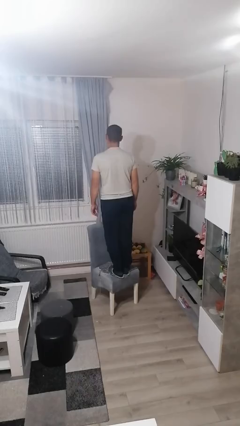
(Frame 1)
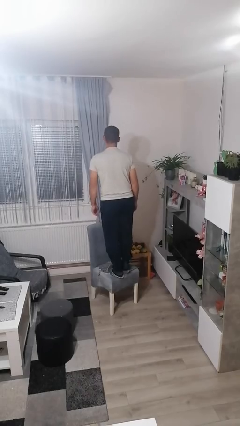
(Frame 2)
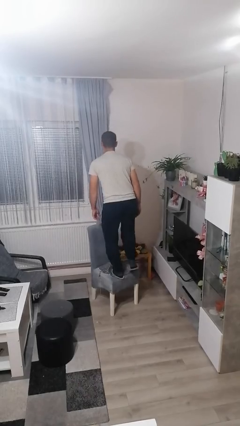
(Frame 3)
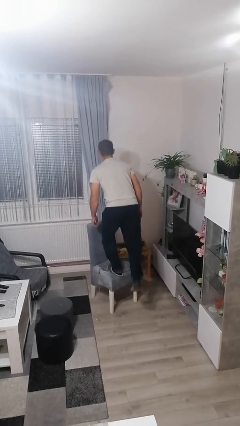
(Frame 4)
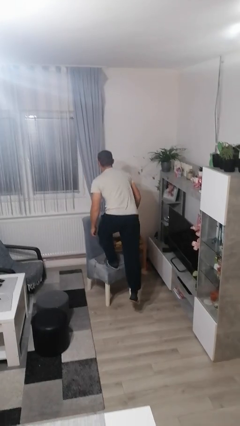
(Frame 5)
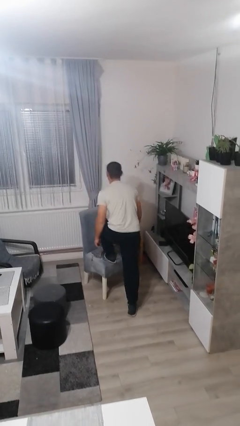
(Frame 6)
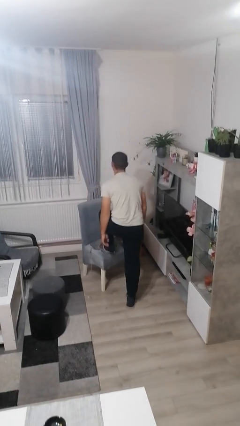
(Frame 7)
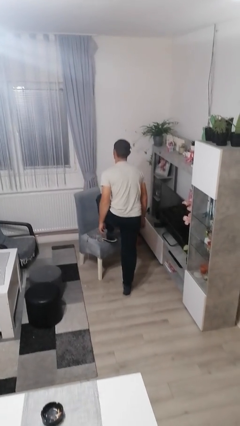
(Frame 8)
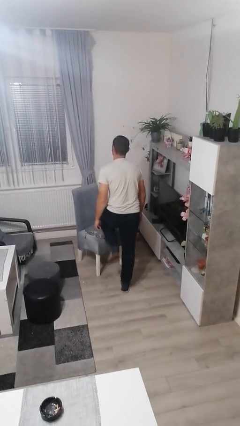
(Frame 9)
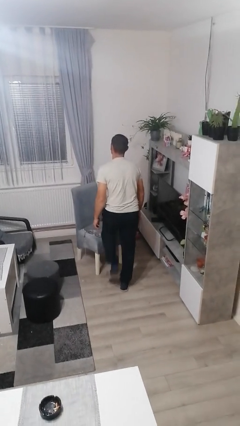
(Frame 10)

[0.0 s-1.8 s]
person climbs off chair

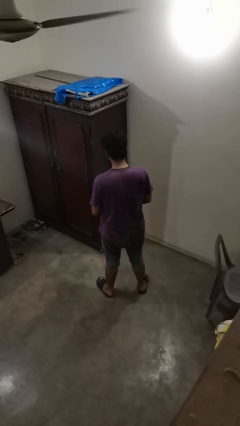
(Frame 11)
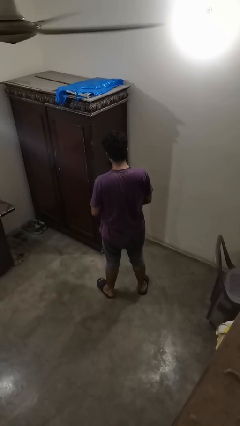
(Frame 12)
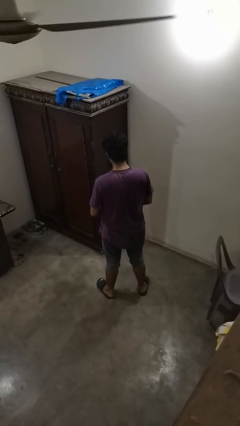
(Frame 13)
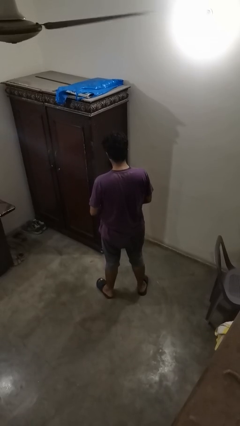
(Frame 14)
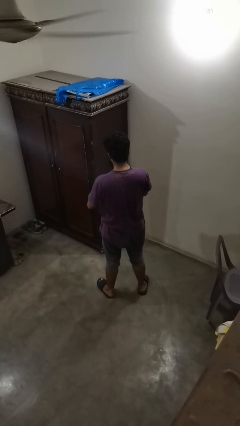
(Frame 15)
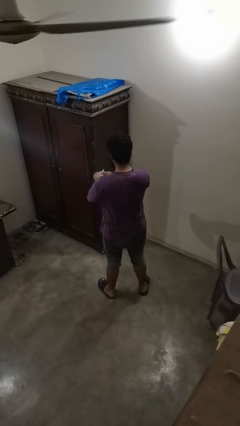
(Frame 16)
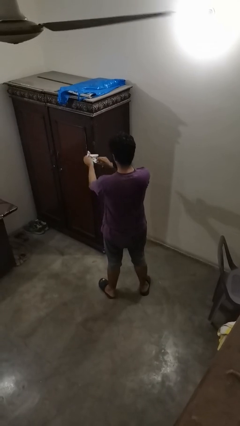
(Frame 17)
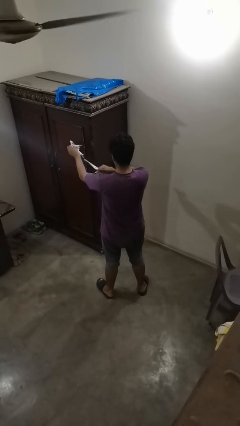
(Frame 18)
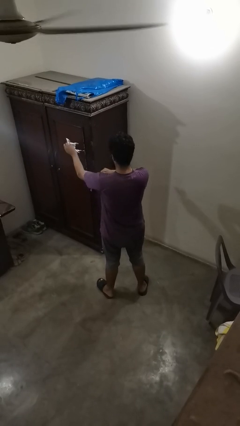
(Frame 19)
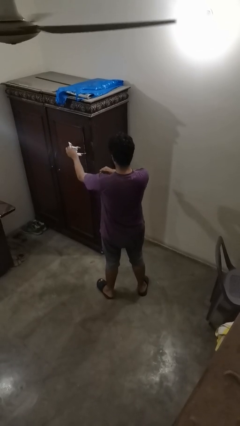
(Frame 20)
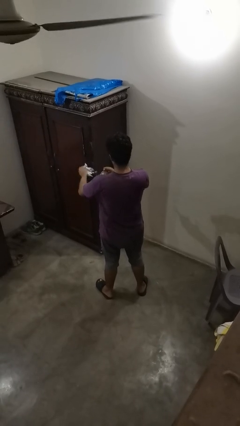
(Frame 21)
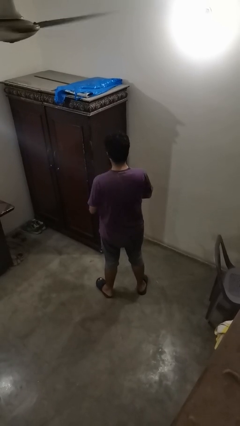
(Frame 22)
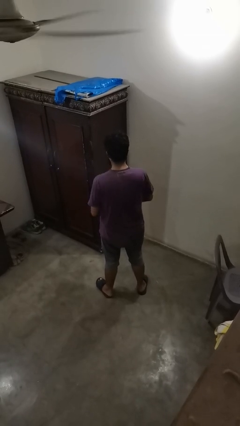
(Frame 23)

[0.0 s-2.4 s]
person tears paper

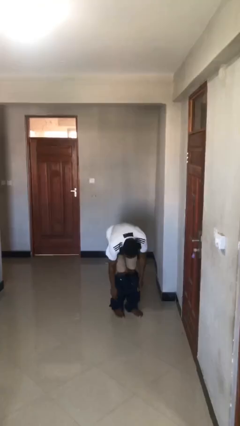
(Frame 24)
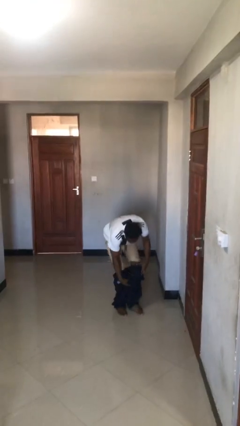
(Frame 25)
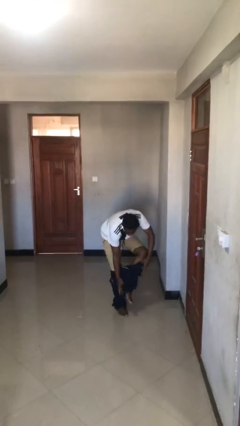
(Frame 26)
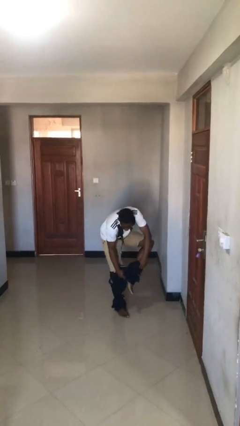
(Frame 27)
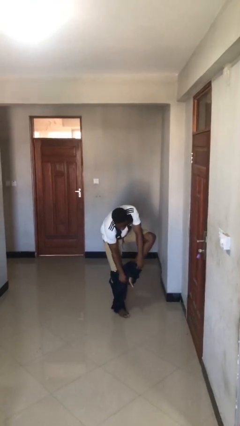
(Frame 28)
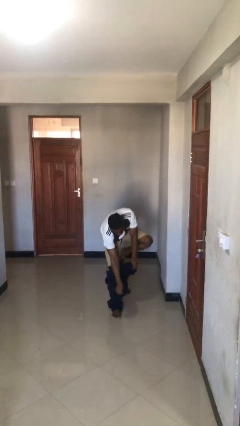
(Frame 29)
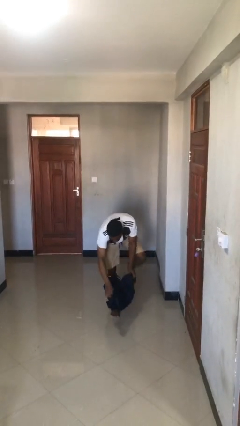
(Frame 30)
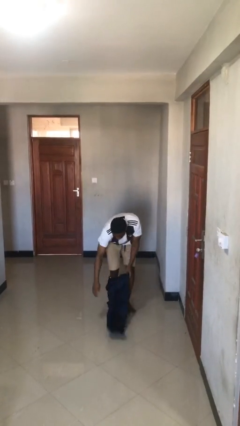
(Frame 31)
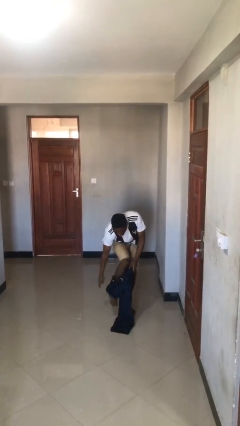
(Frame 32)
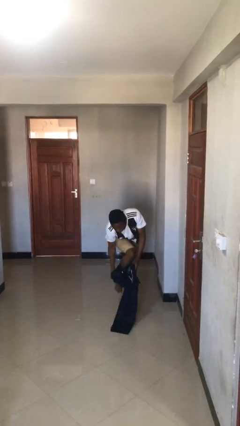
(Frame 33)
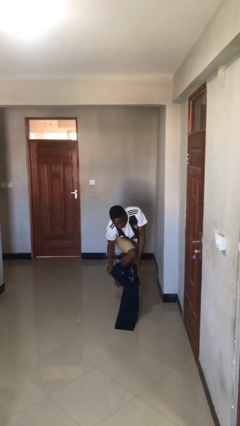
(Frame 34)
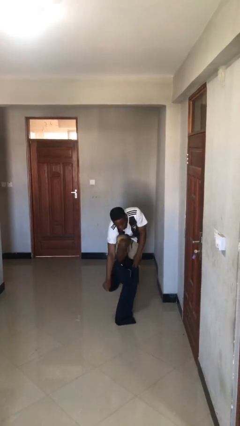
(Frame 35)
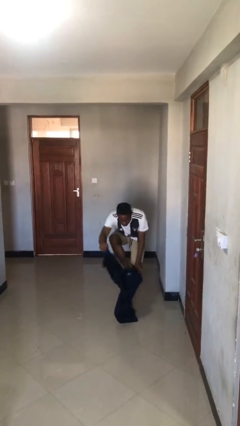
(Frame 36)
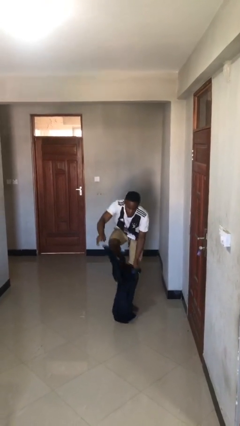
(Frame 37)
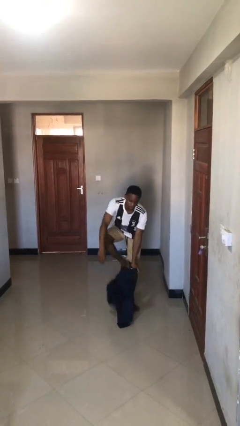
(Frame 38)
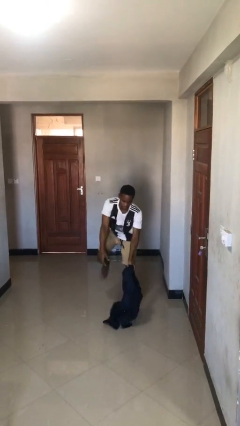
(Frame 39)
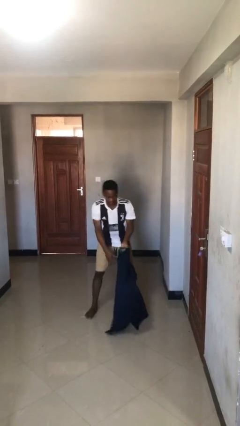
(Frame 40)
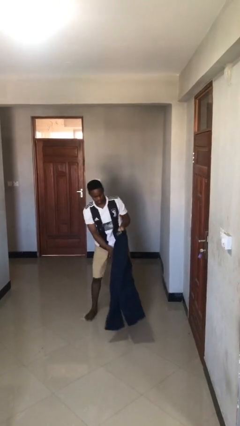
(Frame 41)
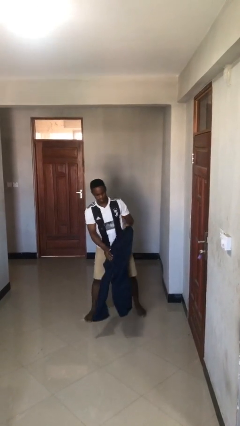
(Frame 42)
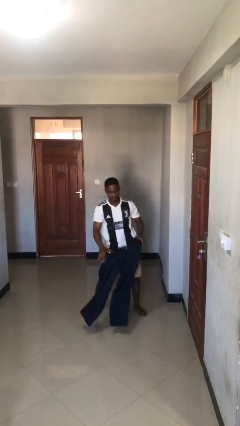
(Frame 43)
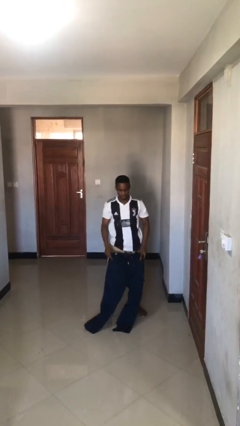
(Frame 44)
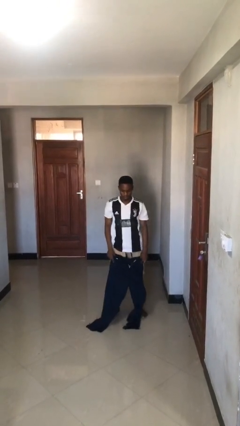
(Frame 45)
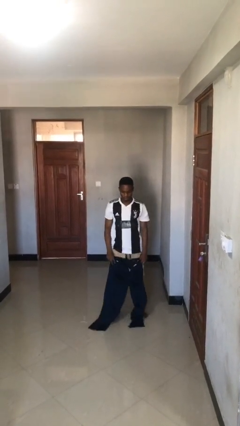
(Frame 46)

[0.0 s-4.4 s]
person takes off pants

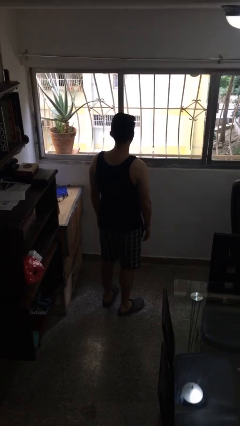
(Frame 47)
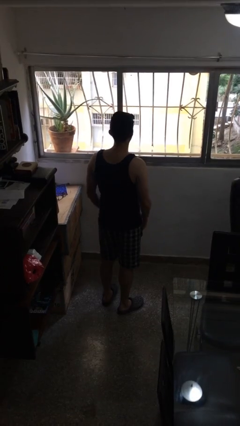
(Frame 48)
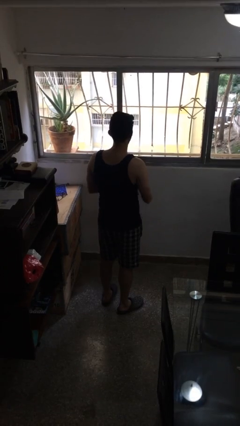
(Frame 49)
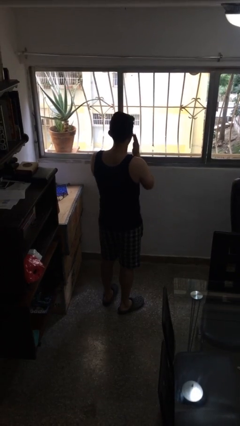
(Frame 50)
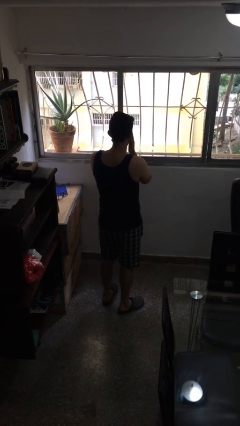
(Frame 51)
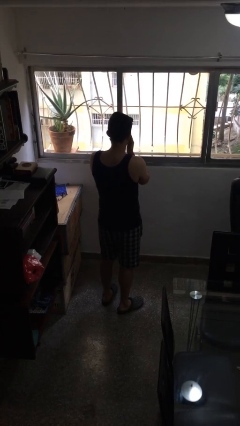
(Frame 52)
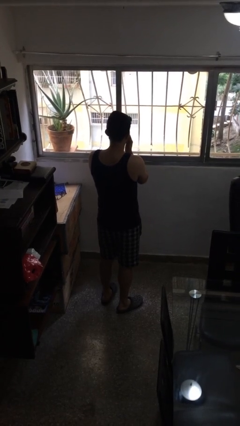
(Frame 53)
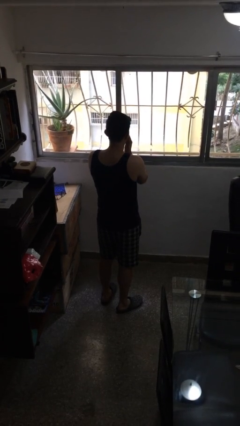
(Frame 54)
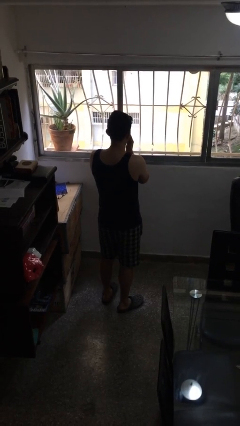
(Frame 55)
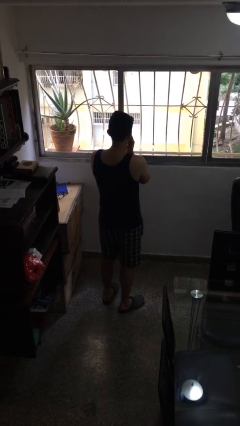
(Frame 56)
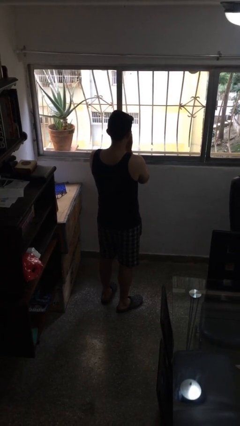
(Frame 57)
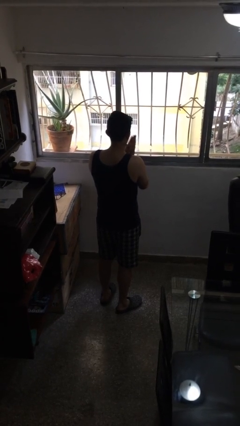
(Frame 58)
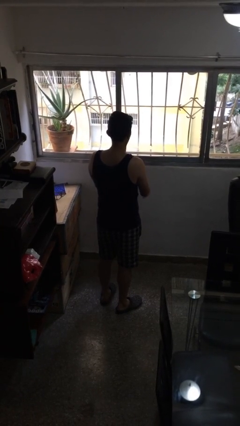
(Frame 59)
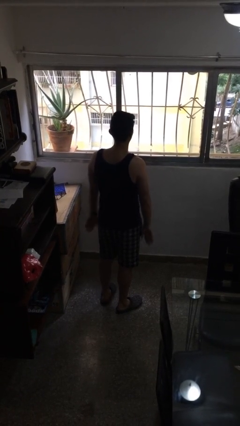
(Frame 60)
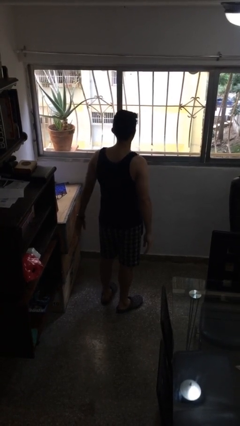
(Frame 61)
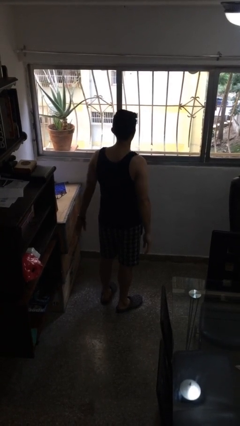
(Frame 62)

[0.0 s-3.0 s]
person rubs eyes

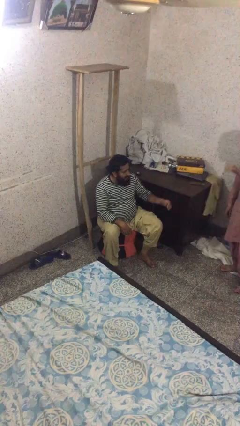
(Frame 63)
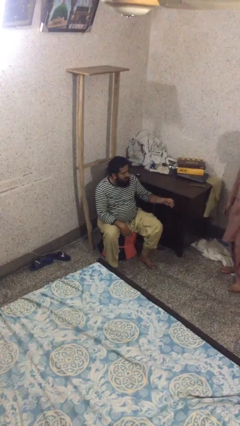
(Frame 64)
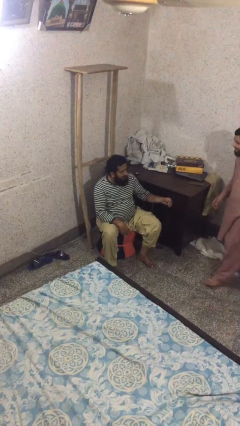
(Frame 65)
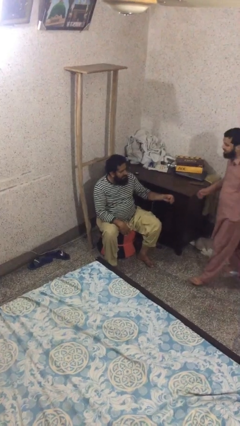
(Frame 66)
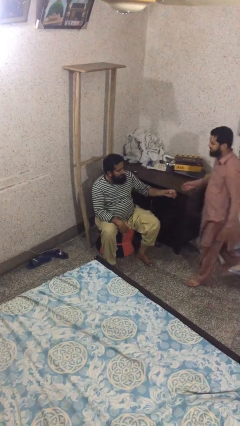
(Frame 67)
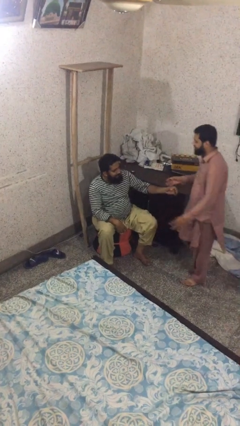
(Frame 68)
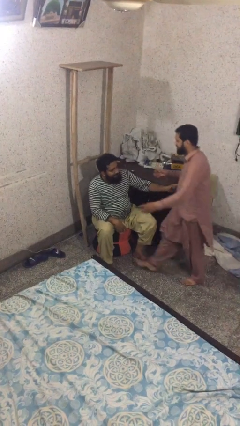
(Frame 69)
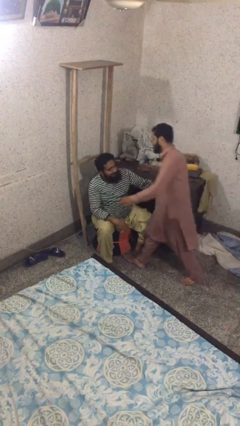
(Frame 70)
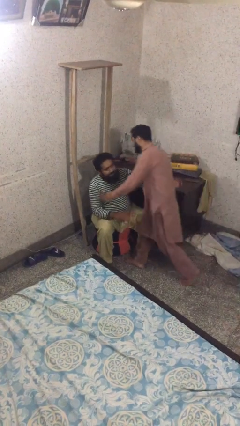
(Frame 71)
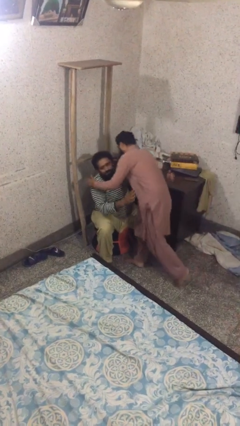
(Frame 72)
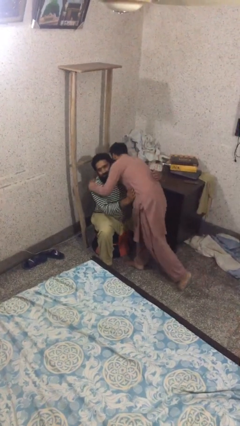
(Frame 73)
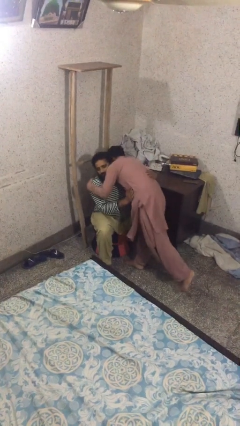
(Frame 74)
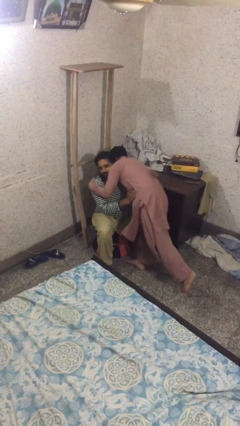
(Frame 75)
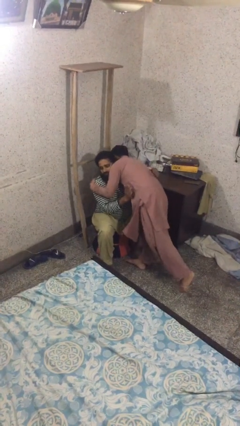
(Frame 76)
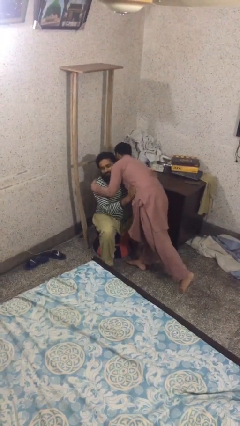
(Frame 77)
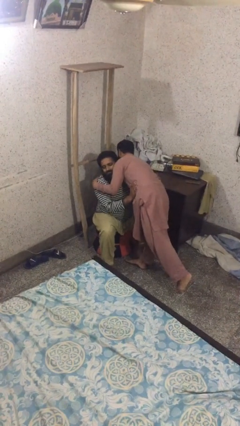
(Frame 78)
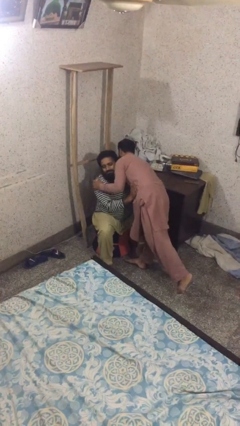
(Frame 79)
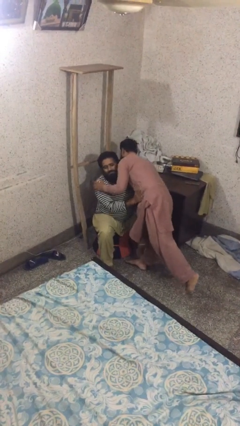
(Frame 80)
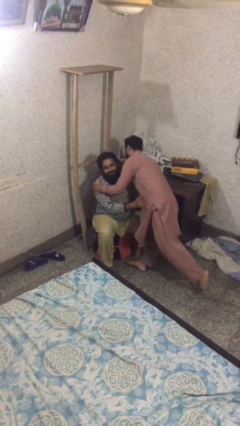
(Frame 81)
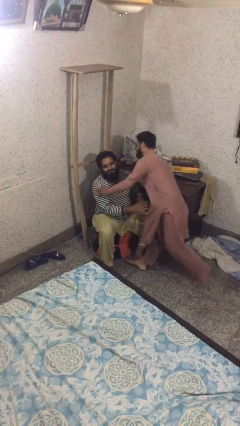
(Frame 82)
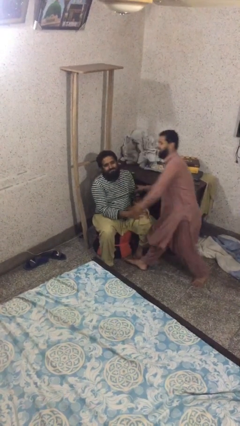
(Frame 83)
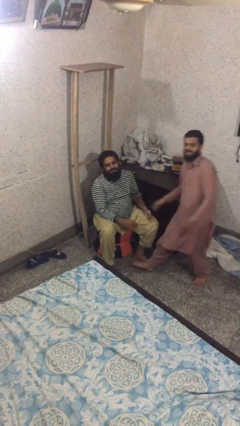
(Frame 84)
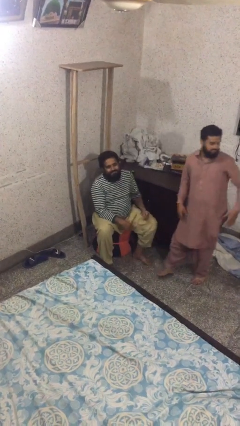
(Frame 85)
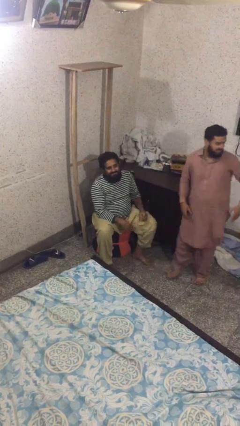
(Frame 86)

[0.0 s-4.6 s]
person embraces person

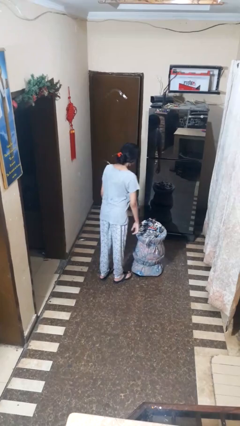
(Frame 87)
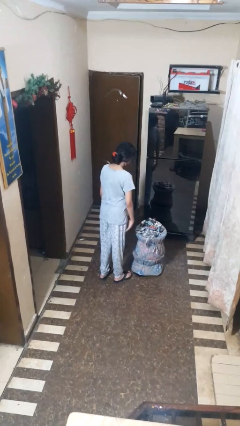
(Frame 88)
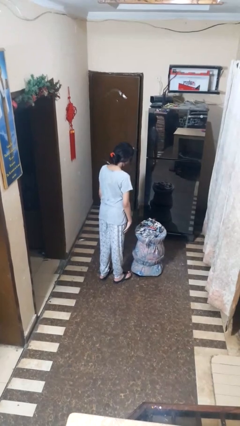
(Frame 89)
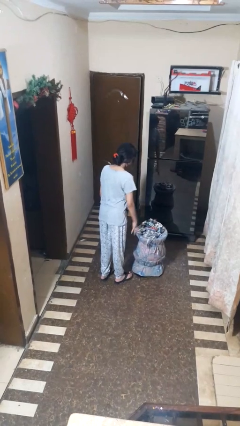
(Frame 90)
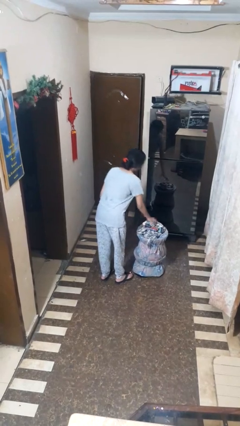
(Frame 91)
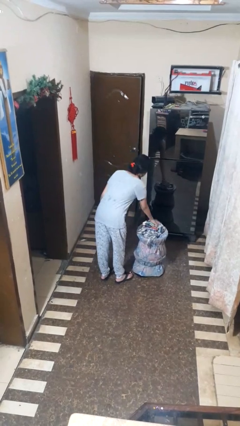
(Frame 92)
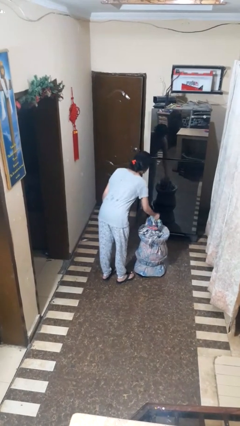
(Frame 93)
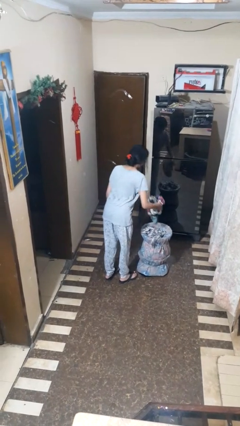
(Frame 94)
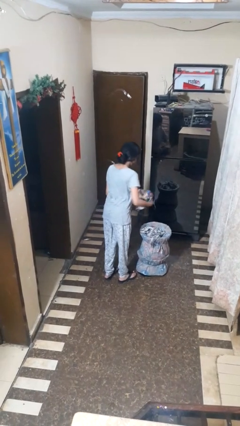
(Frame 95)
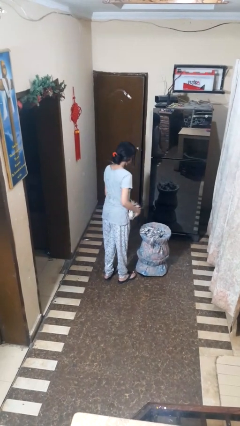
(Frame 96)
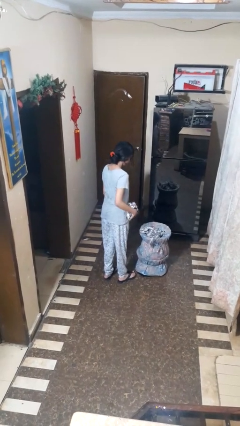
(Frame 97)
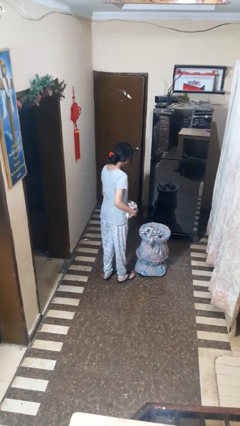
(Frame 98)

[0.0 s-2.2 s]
person takes object from basket
